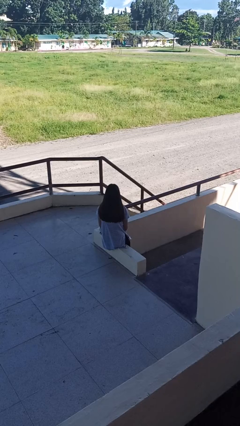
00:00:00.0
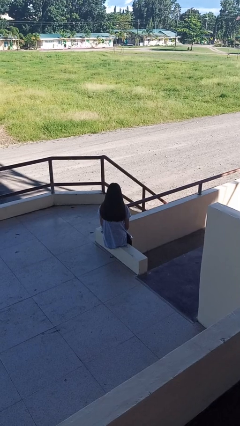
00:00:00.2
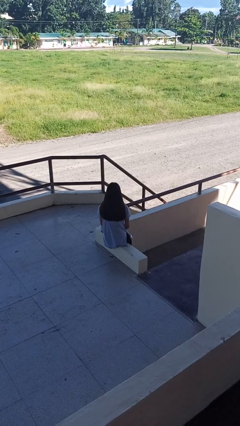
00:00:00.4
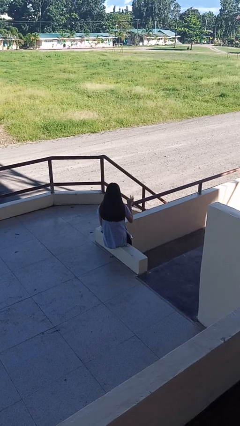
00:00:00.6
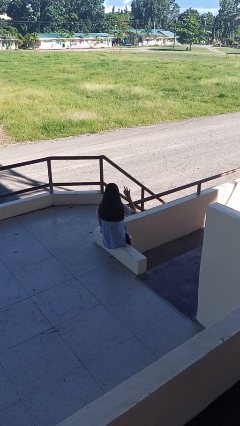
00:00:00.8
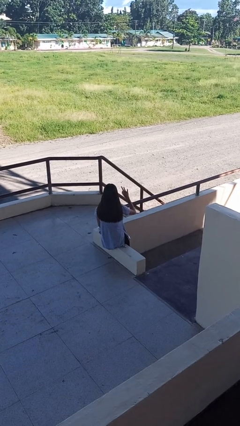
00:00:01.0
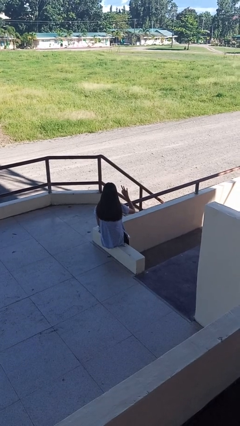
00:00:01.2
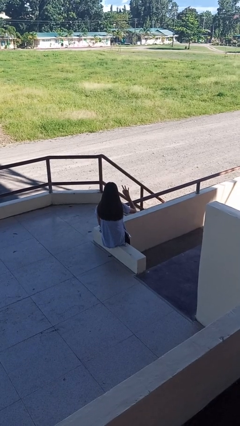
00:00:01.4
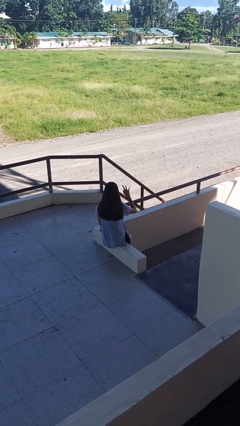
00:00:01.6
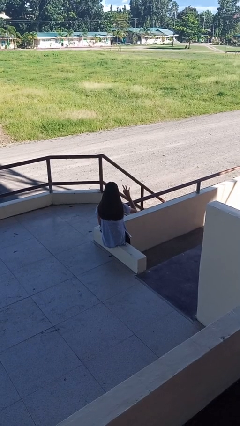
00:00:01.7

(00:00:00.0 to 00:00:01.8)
person gestures number three

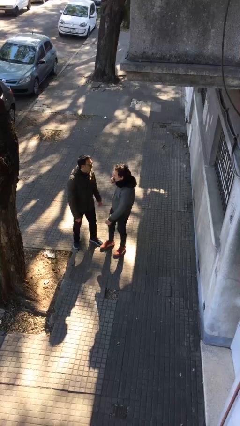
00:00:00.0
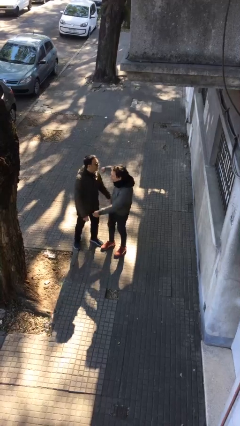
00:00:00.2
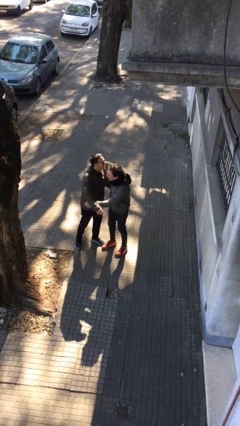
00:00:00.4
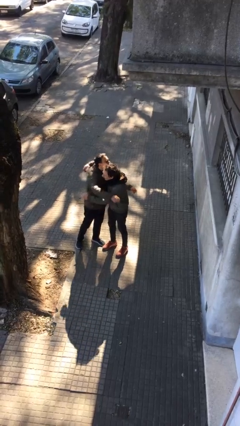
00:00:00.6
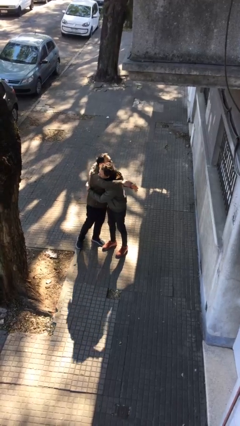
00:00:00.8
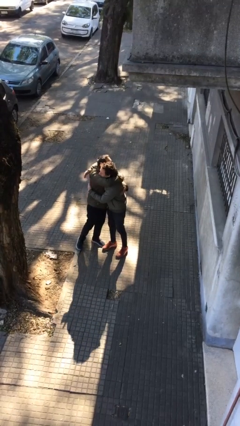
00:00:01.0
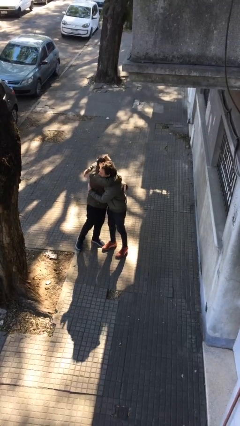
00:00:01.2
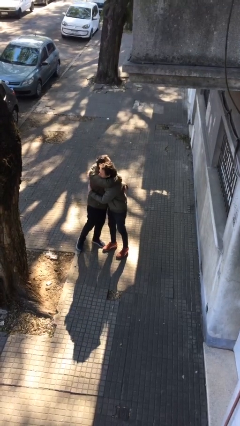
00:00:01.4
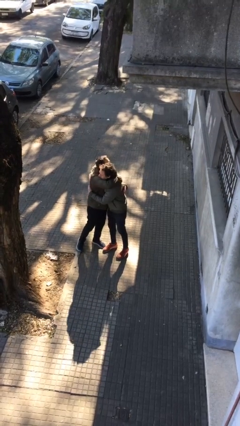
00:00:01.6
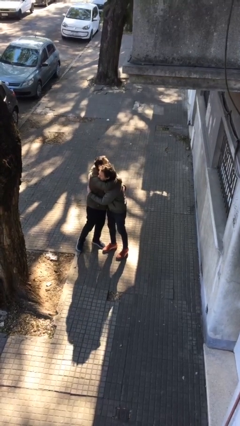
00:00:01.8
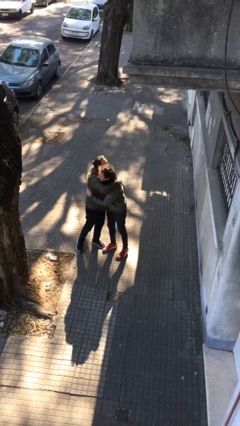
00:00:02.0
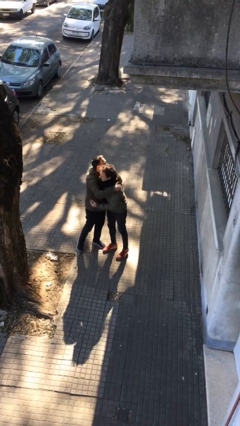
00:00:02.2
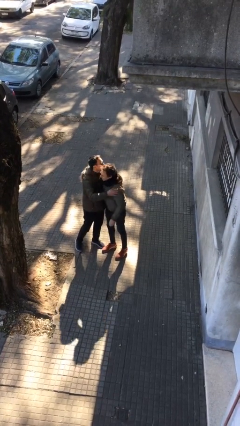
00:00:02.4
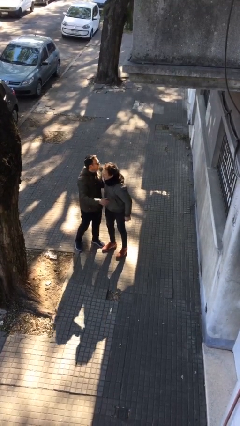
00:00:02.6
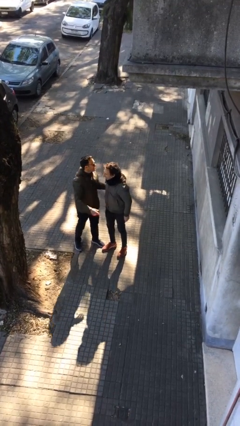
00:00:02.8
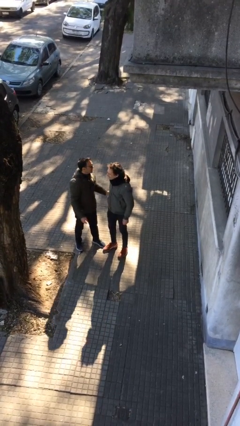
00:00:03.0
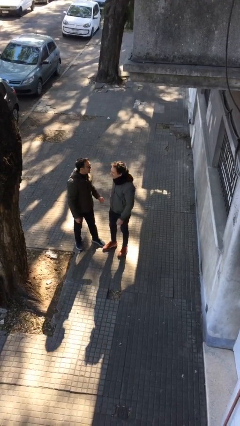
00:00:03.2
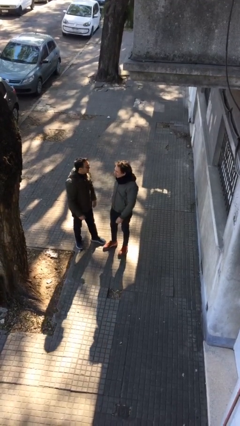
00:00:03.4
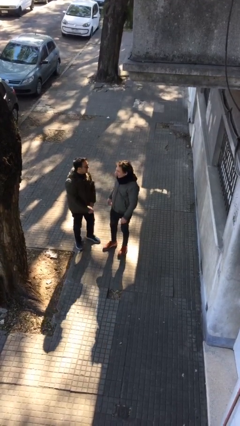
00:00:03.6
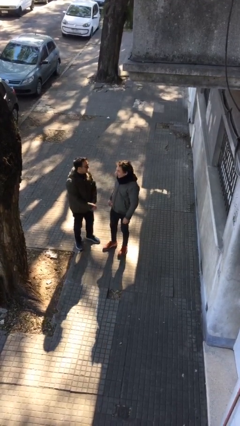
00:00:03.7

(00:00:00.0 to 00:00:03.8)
person embraces person

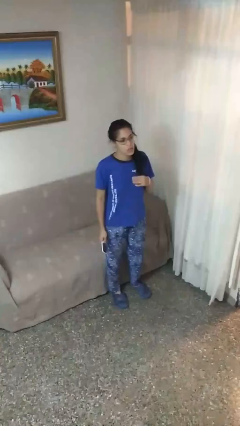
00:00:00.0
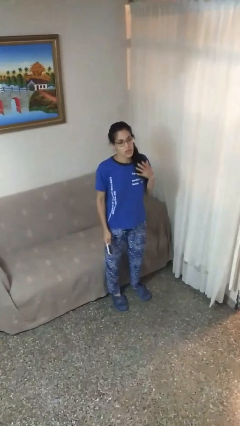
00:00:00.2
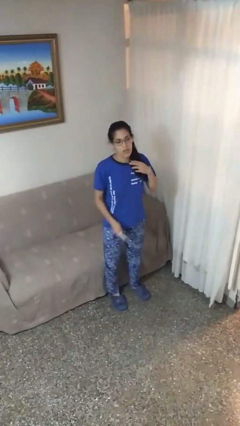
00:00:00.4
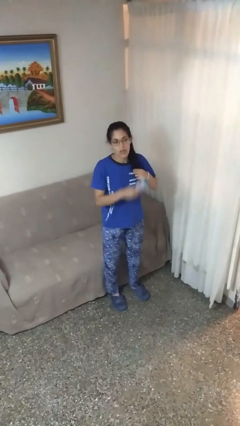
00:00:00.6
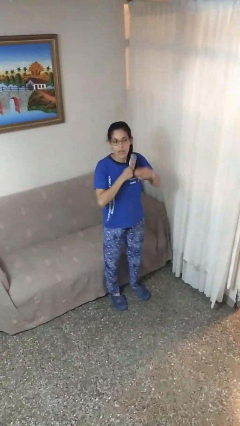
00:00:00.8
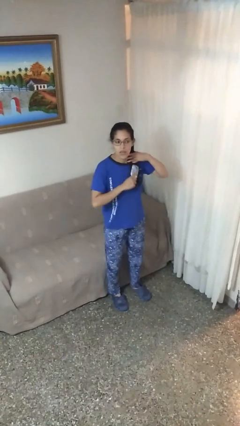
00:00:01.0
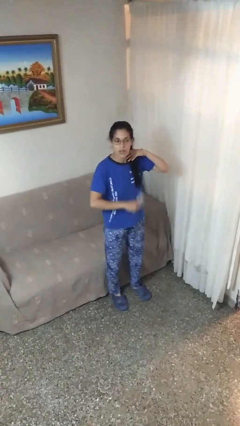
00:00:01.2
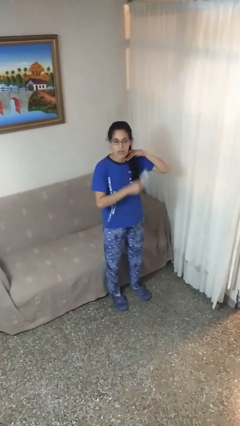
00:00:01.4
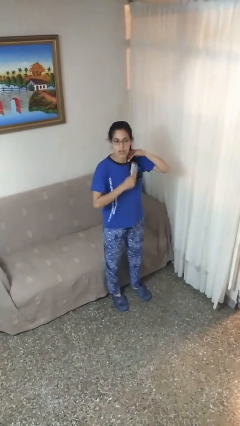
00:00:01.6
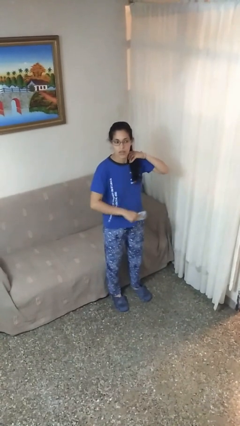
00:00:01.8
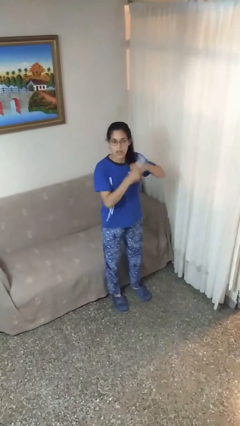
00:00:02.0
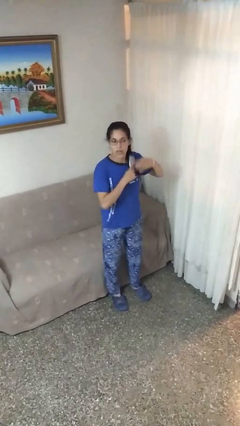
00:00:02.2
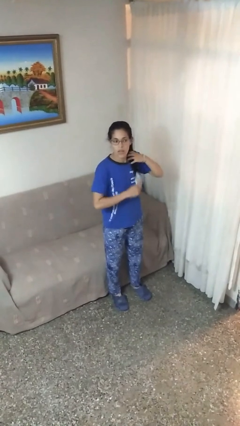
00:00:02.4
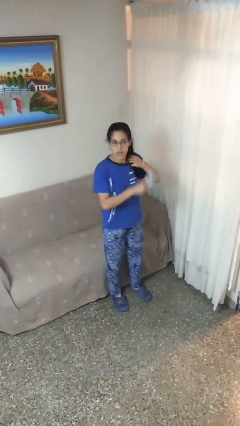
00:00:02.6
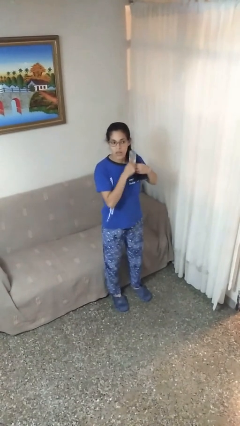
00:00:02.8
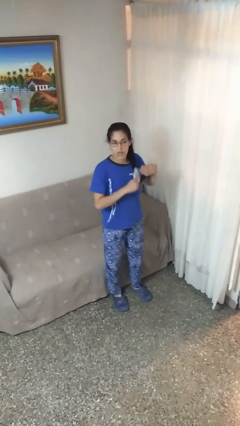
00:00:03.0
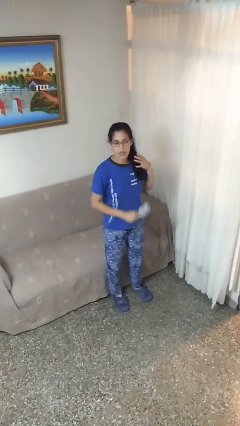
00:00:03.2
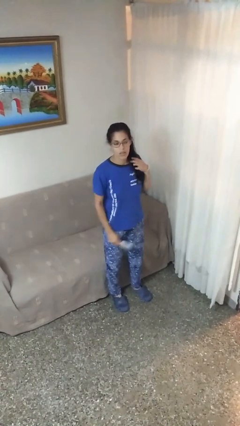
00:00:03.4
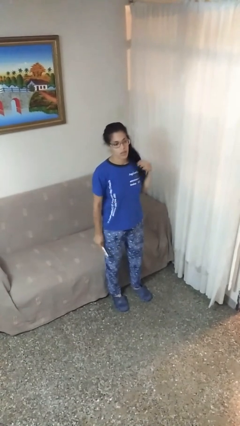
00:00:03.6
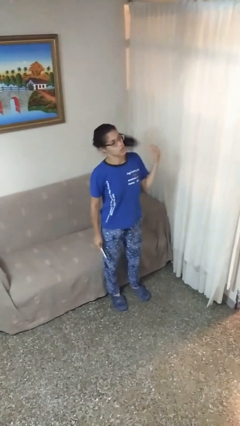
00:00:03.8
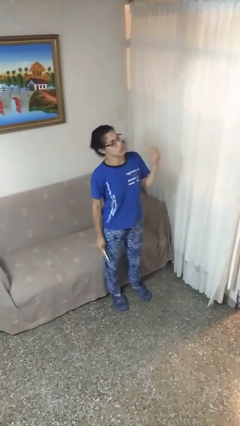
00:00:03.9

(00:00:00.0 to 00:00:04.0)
person brushes hair

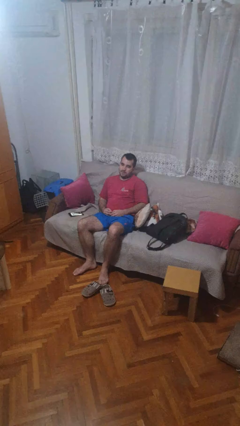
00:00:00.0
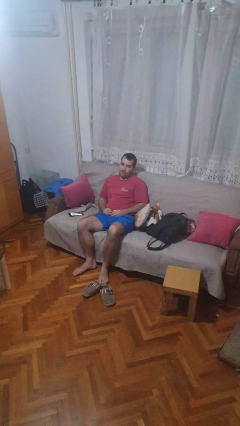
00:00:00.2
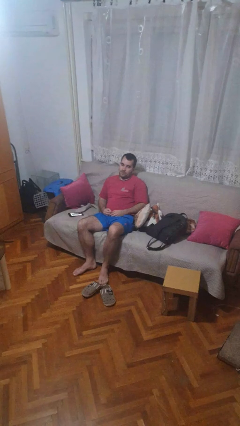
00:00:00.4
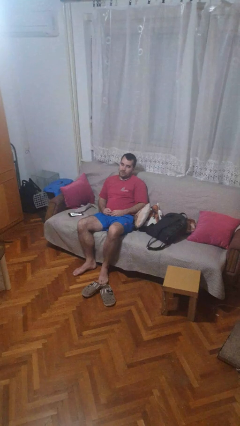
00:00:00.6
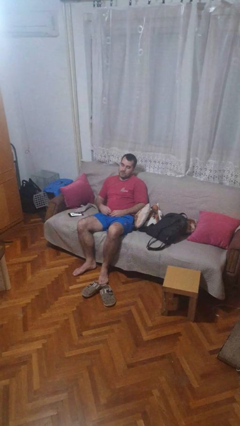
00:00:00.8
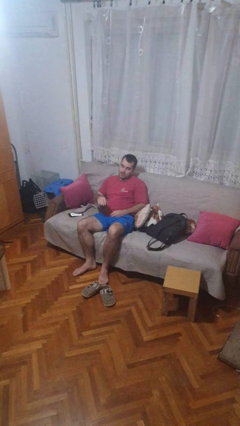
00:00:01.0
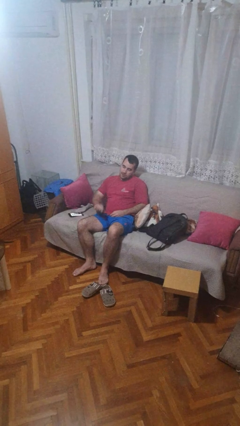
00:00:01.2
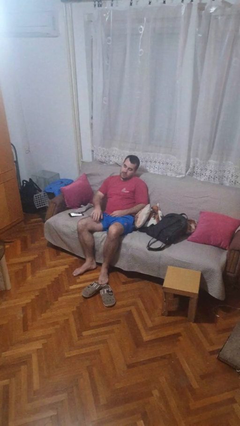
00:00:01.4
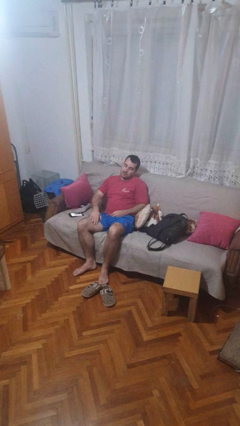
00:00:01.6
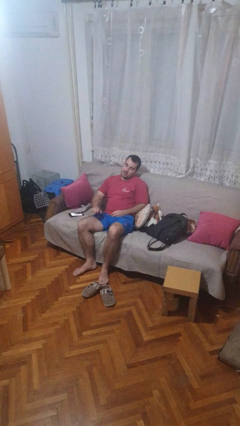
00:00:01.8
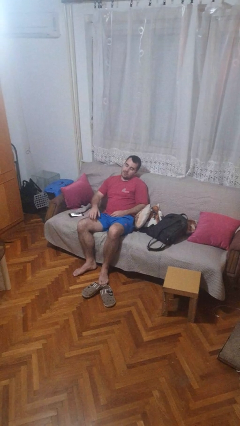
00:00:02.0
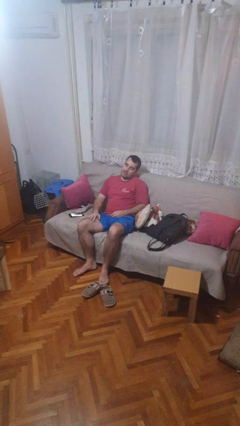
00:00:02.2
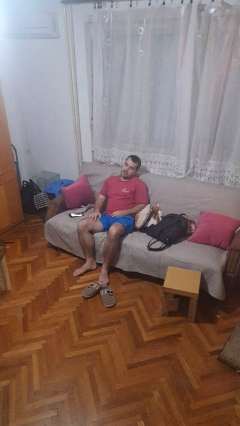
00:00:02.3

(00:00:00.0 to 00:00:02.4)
person slaps hands on thighs

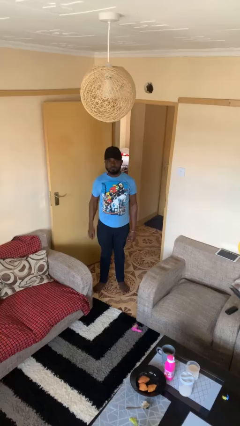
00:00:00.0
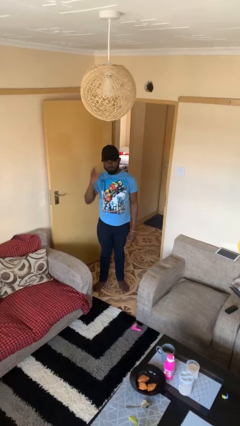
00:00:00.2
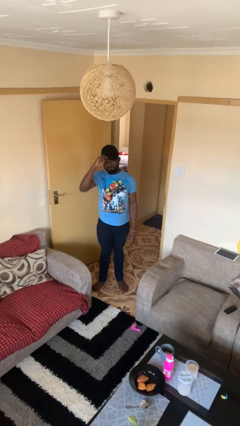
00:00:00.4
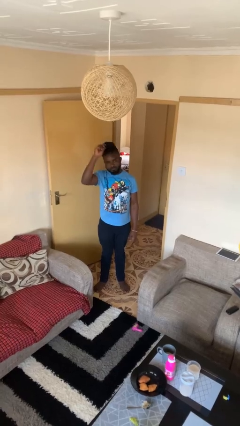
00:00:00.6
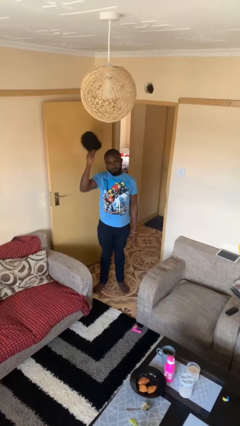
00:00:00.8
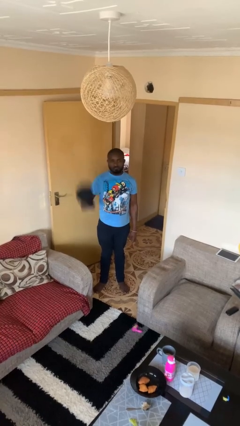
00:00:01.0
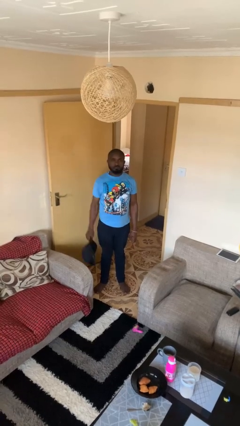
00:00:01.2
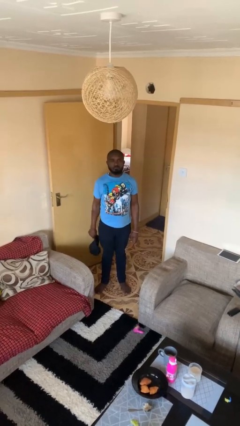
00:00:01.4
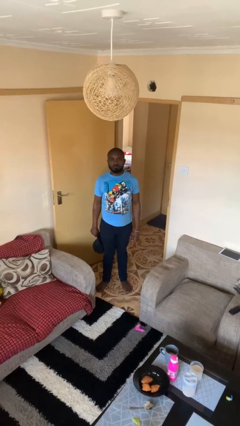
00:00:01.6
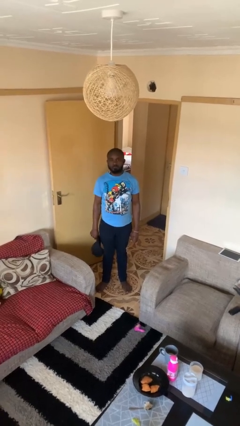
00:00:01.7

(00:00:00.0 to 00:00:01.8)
person takes off hat

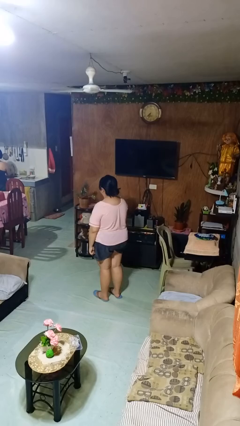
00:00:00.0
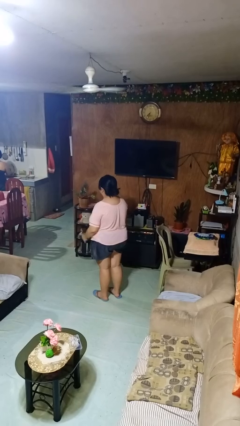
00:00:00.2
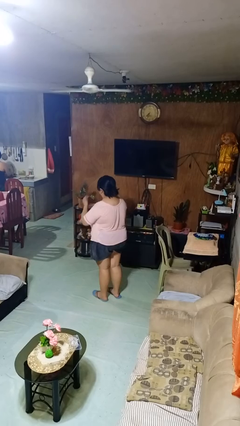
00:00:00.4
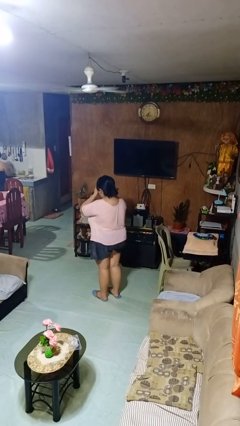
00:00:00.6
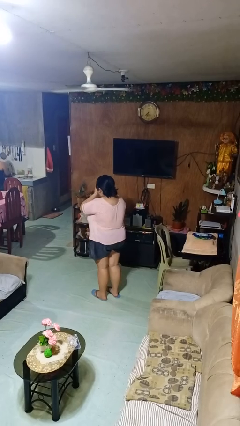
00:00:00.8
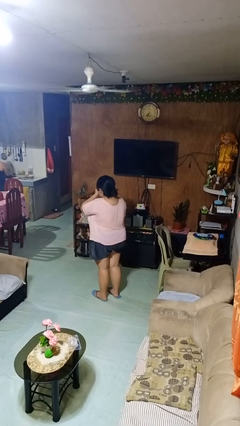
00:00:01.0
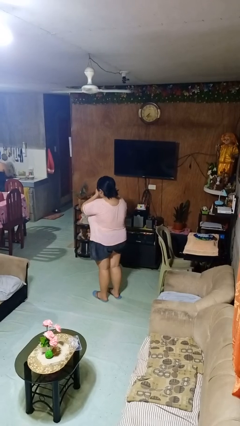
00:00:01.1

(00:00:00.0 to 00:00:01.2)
person yawns

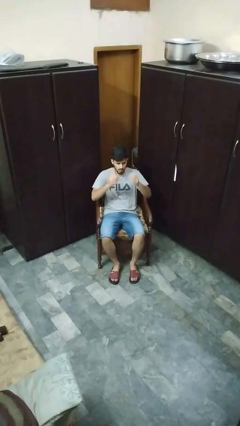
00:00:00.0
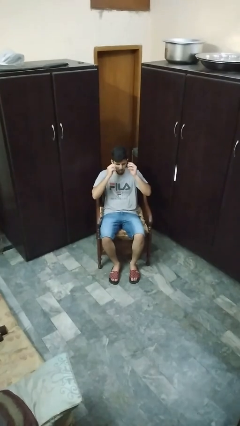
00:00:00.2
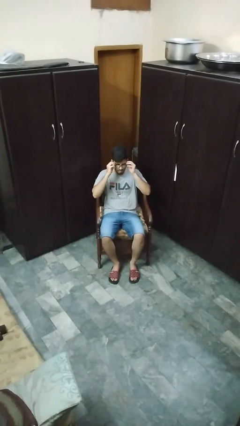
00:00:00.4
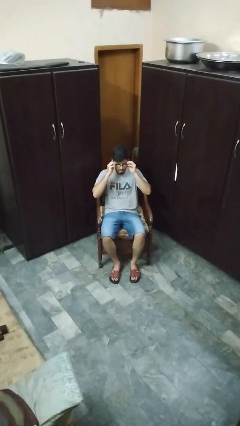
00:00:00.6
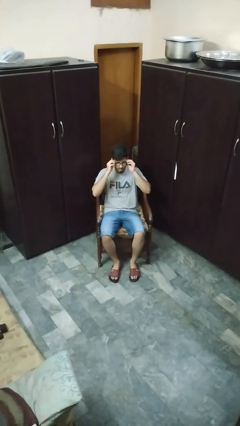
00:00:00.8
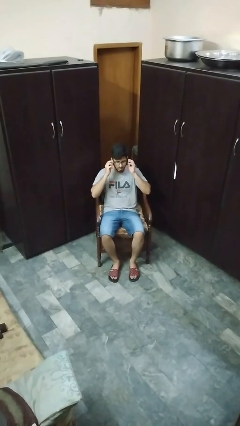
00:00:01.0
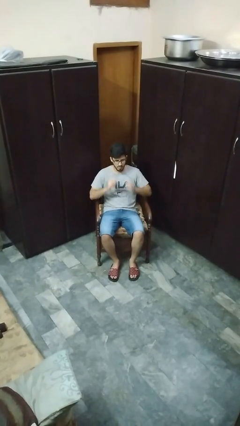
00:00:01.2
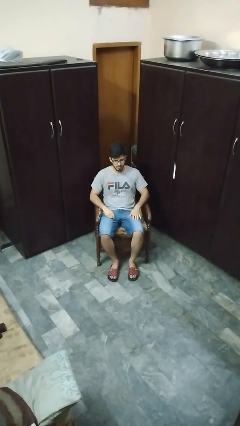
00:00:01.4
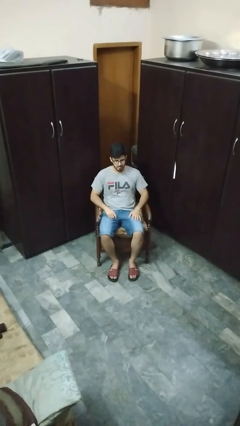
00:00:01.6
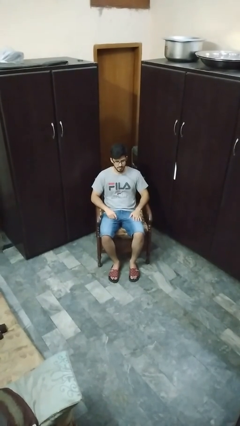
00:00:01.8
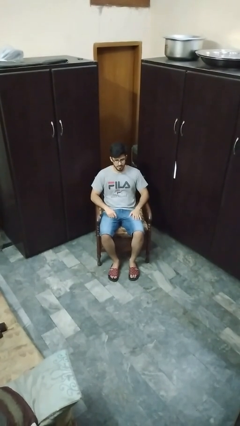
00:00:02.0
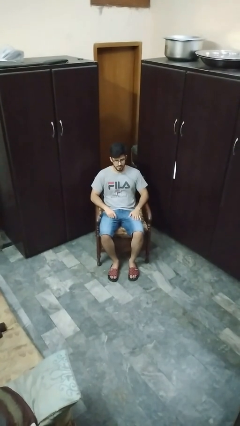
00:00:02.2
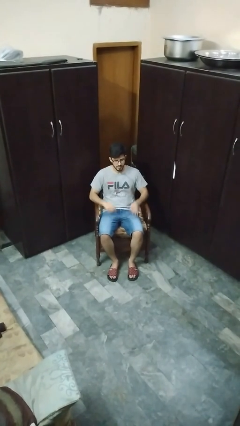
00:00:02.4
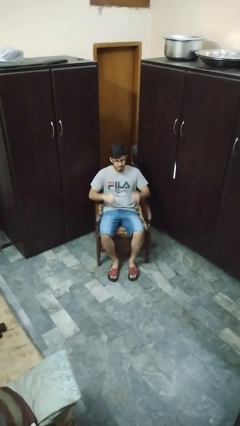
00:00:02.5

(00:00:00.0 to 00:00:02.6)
person puts on glasses
